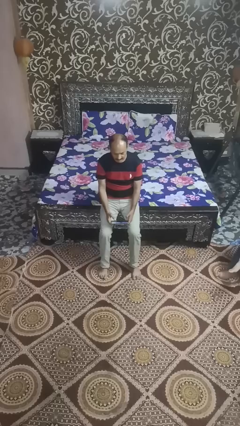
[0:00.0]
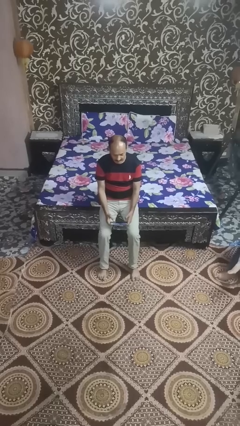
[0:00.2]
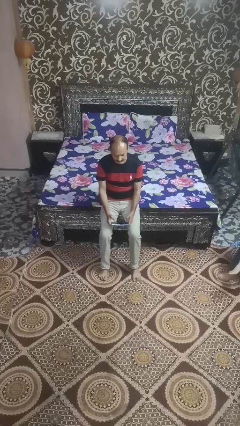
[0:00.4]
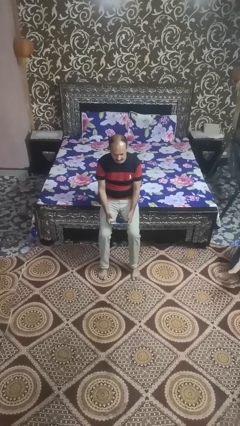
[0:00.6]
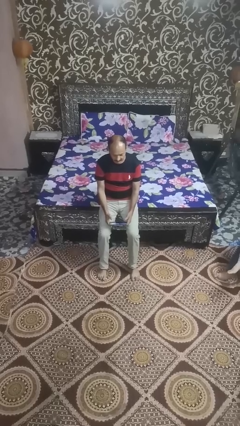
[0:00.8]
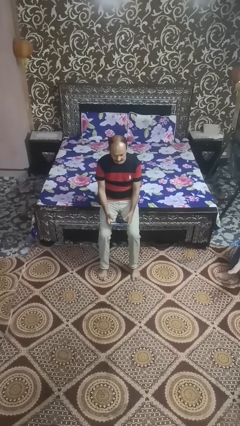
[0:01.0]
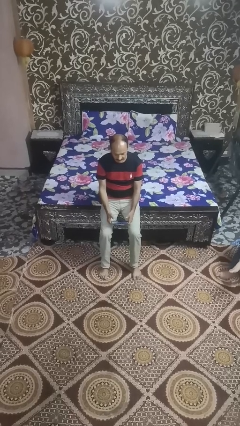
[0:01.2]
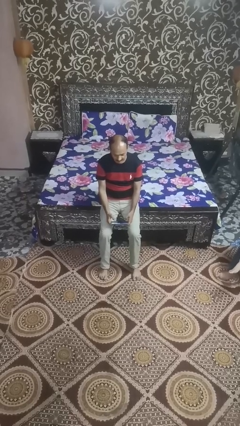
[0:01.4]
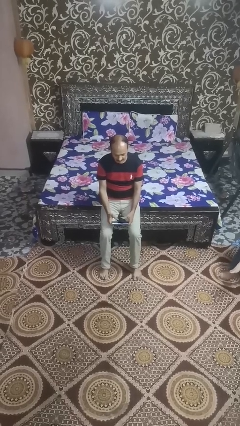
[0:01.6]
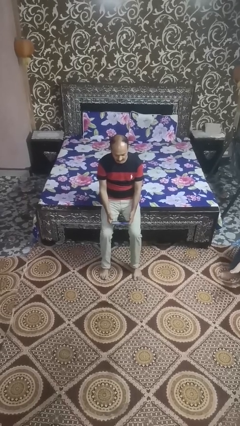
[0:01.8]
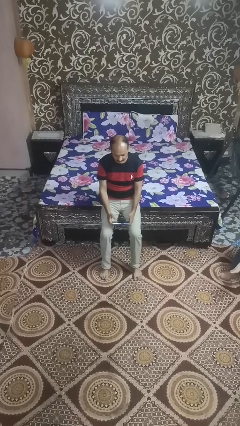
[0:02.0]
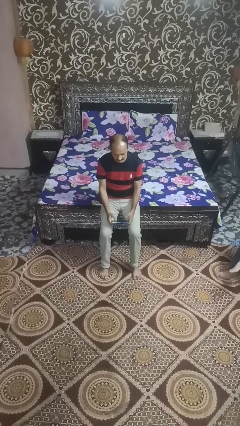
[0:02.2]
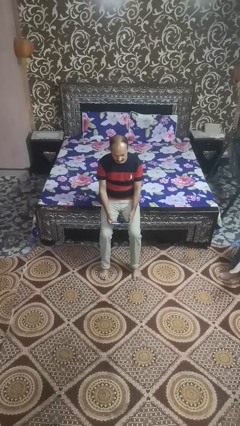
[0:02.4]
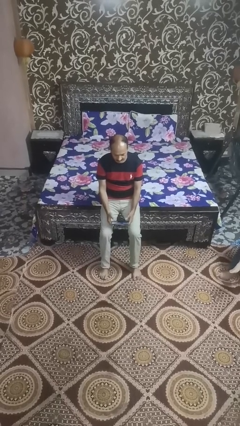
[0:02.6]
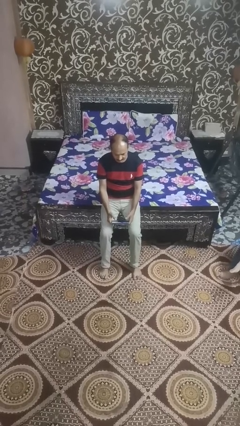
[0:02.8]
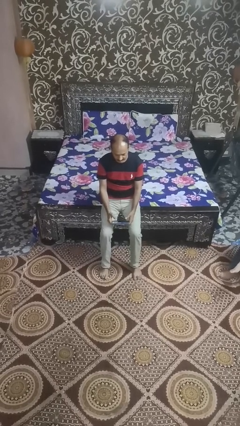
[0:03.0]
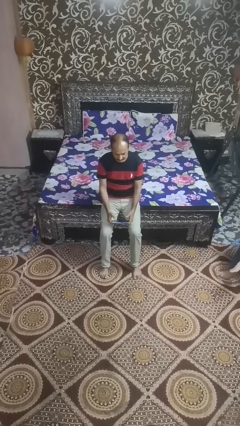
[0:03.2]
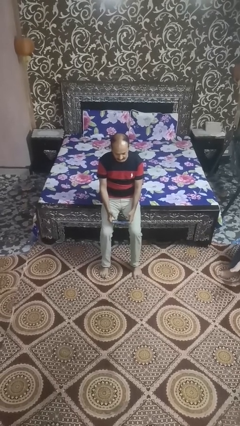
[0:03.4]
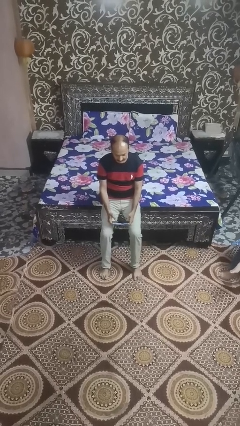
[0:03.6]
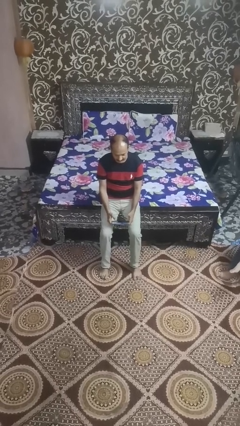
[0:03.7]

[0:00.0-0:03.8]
person interacts with handheld game

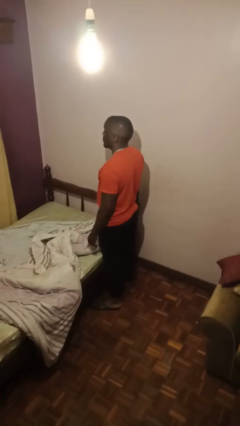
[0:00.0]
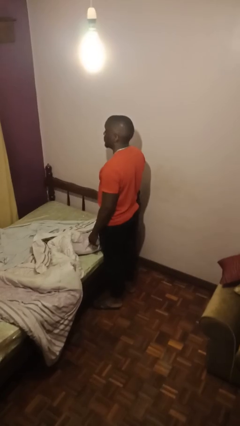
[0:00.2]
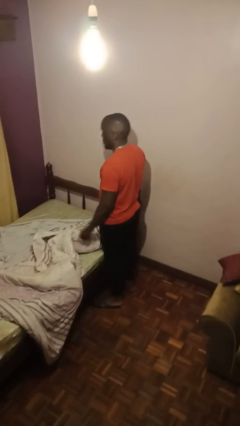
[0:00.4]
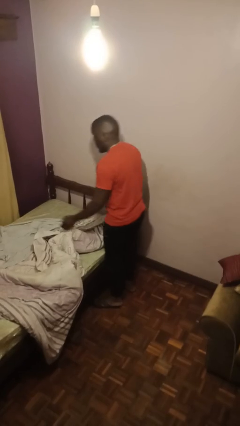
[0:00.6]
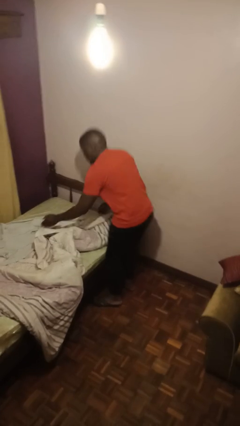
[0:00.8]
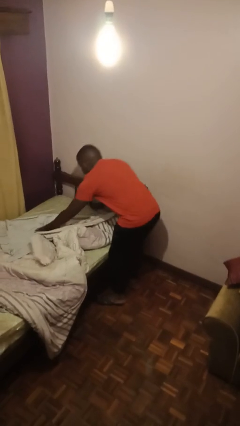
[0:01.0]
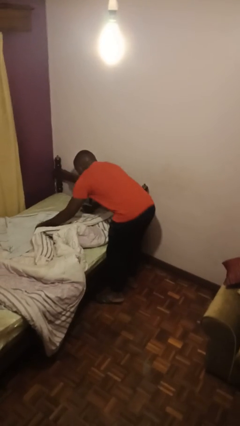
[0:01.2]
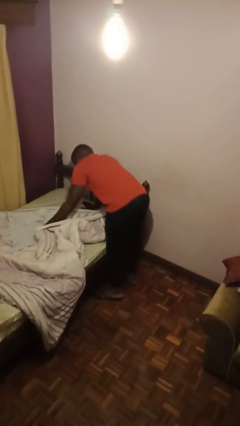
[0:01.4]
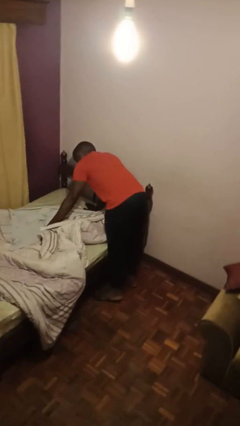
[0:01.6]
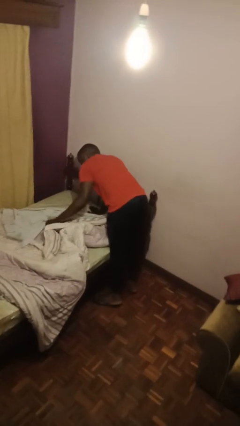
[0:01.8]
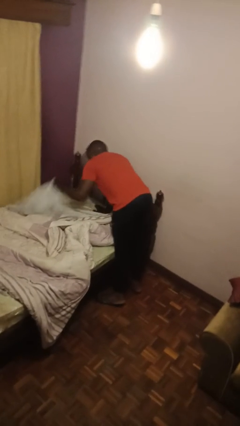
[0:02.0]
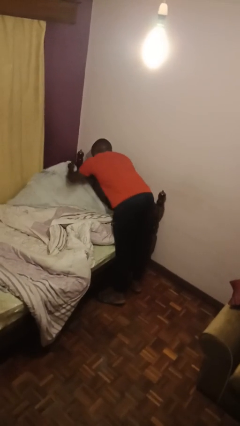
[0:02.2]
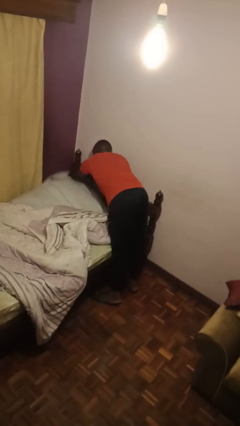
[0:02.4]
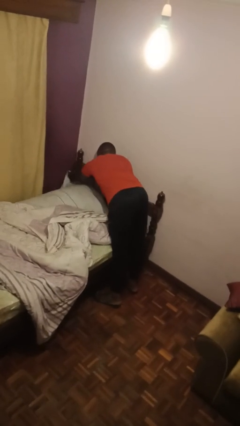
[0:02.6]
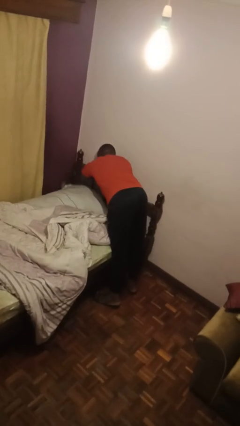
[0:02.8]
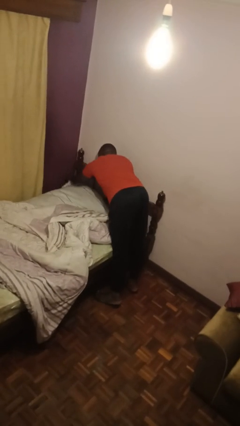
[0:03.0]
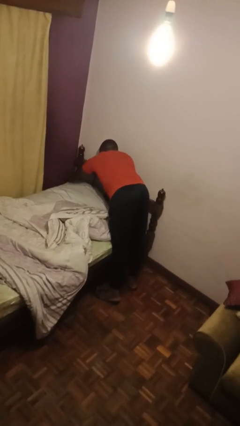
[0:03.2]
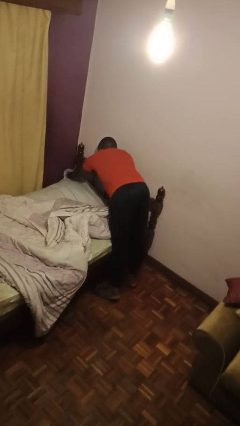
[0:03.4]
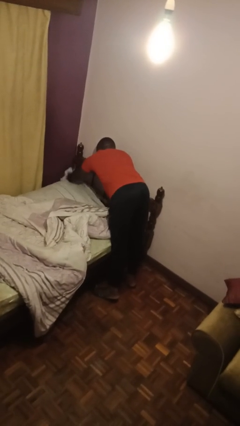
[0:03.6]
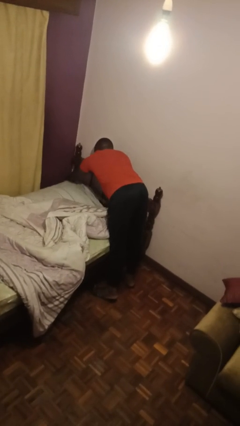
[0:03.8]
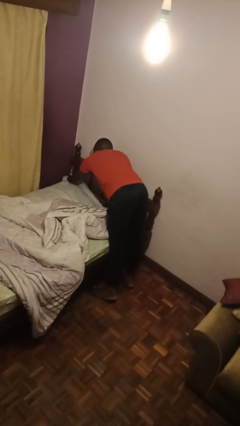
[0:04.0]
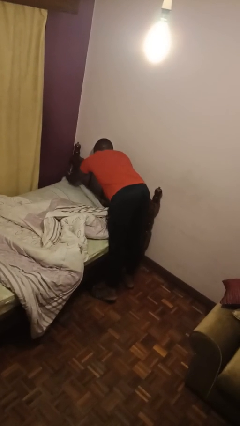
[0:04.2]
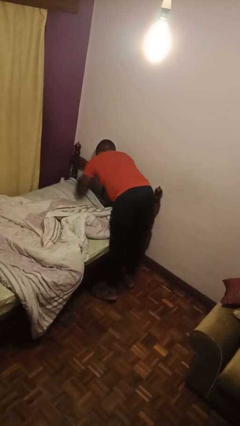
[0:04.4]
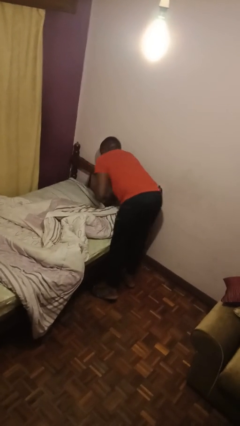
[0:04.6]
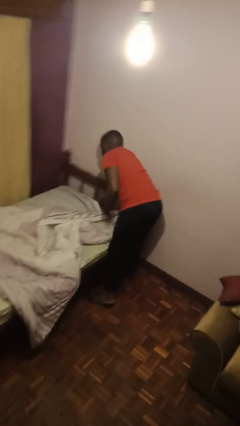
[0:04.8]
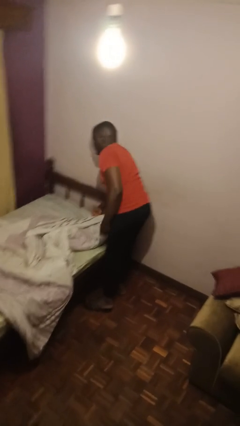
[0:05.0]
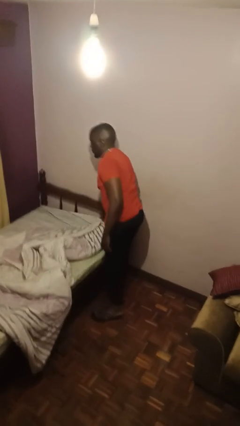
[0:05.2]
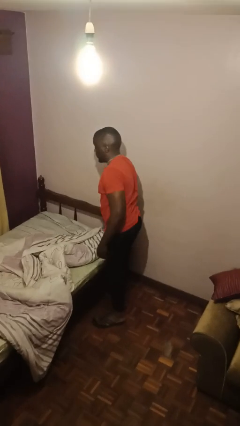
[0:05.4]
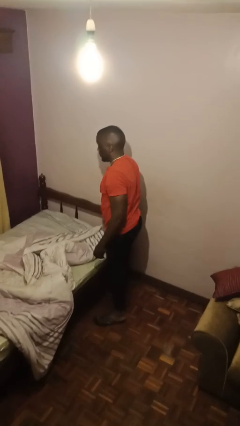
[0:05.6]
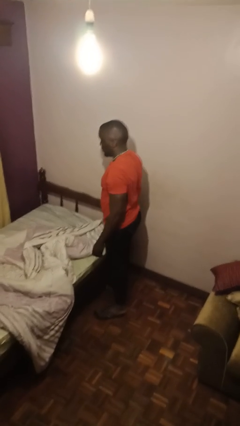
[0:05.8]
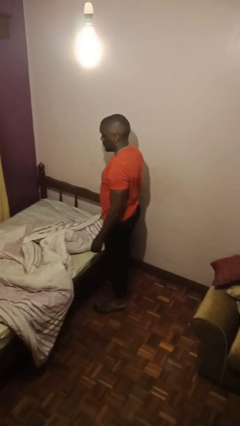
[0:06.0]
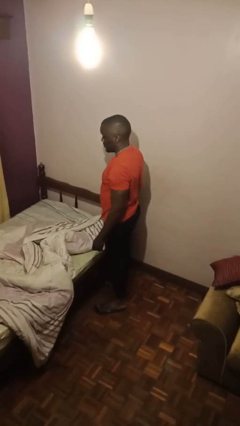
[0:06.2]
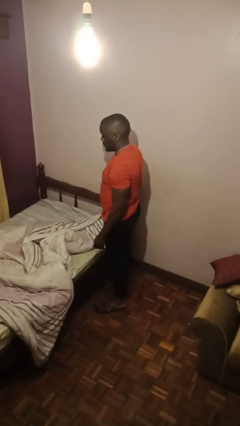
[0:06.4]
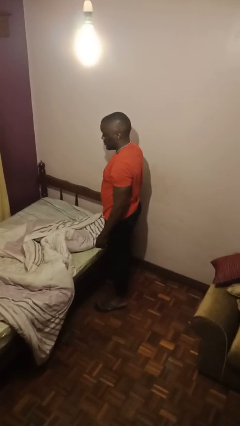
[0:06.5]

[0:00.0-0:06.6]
person makes bed

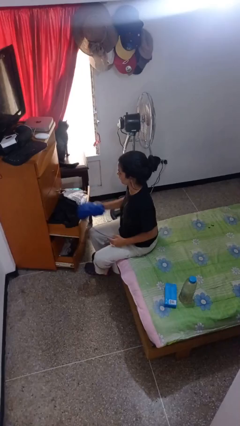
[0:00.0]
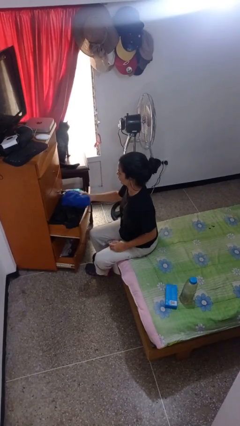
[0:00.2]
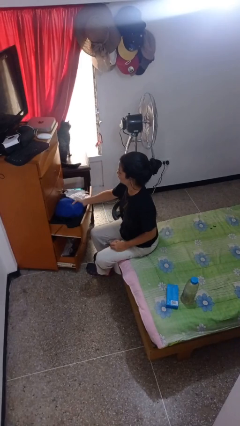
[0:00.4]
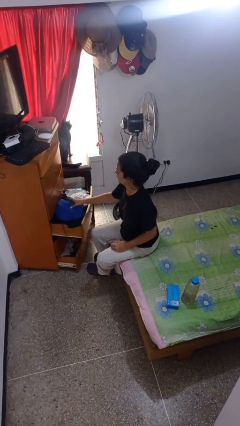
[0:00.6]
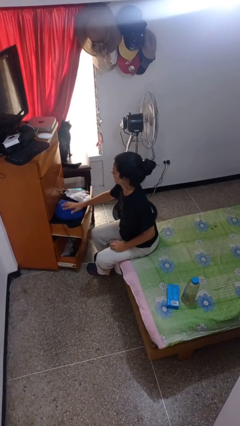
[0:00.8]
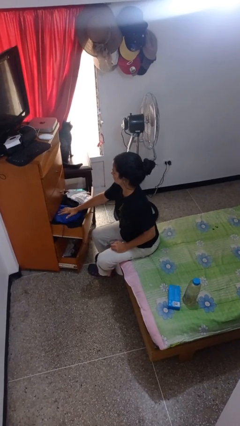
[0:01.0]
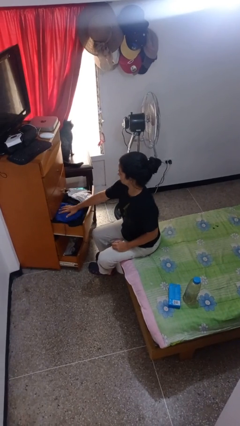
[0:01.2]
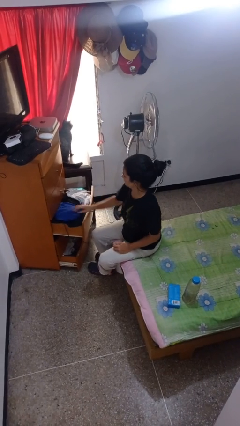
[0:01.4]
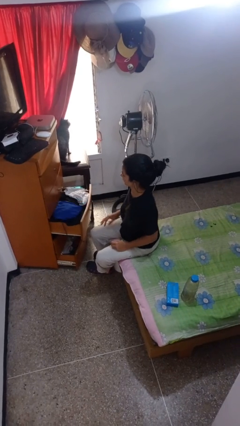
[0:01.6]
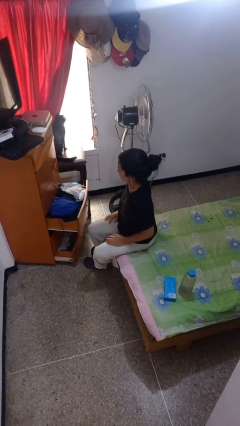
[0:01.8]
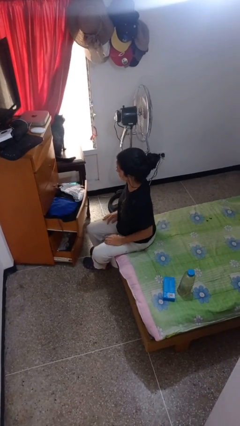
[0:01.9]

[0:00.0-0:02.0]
person puts clothes into dresser

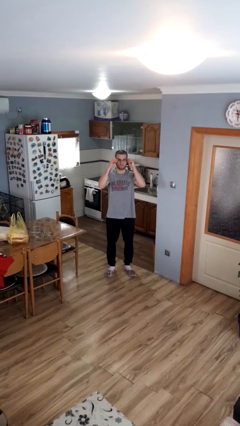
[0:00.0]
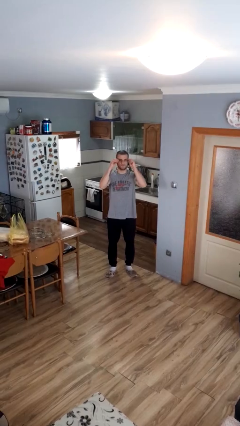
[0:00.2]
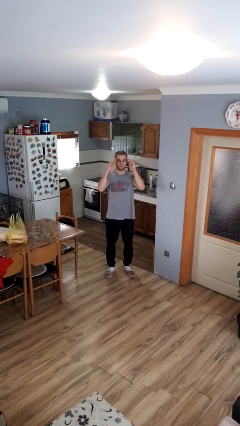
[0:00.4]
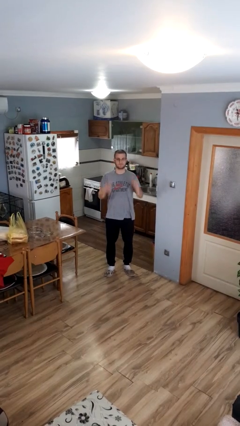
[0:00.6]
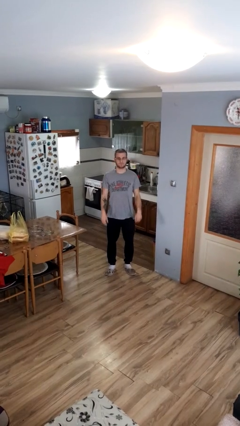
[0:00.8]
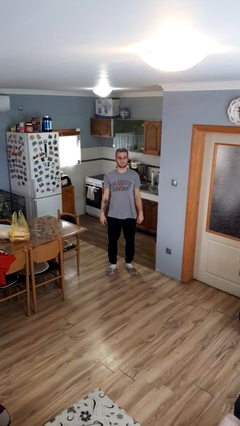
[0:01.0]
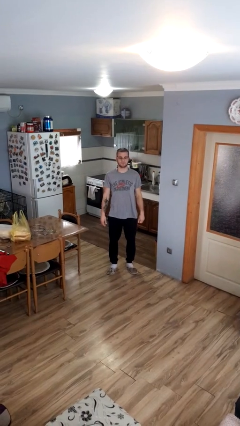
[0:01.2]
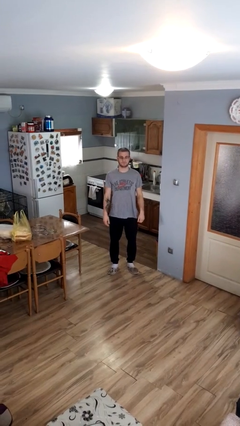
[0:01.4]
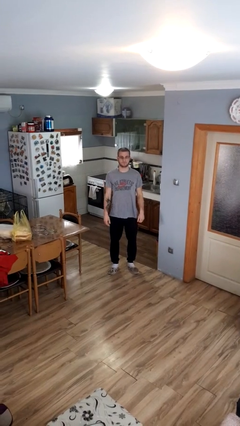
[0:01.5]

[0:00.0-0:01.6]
person puts on glasses

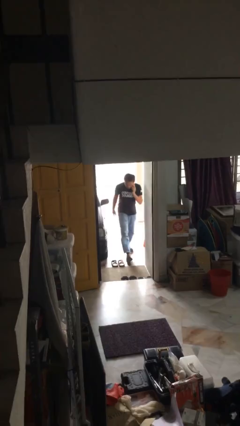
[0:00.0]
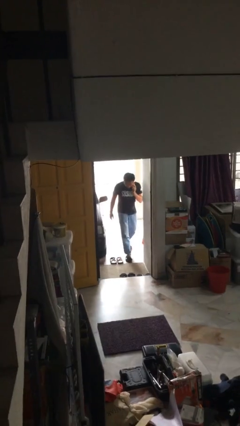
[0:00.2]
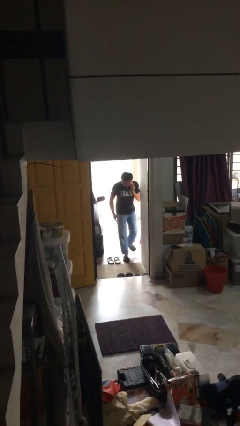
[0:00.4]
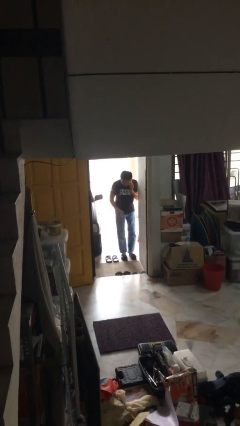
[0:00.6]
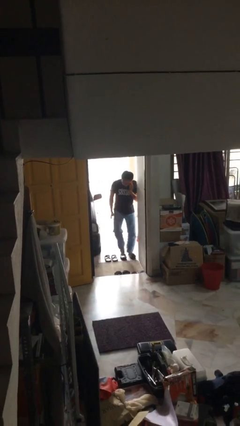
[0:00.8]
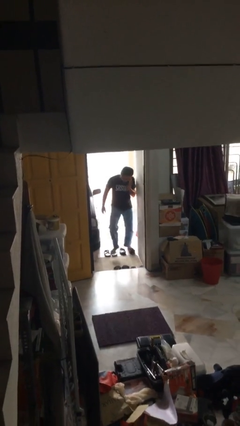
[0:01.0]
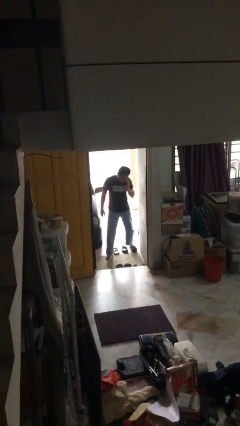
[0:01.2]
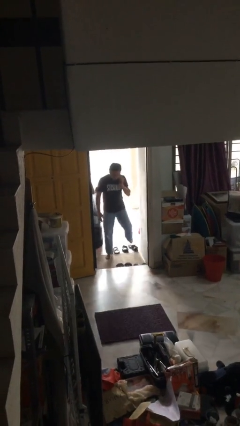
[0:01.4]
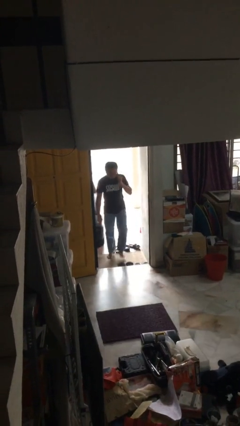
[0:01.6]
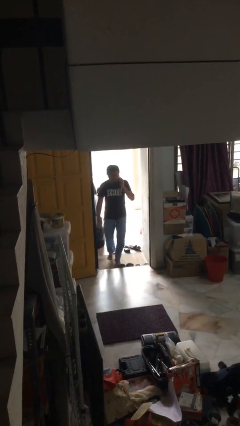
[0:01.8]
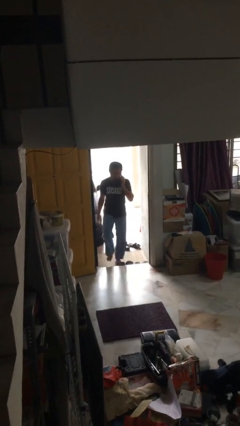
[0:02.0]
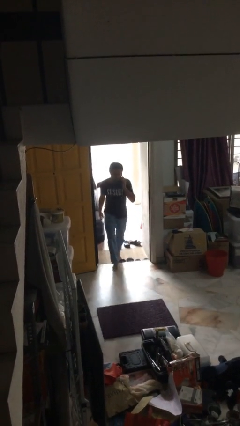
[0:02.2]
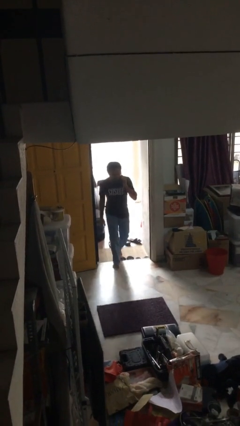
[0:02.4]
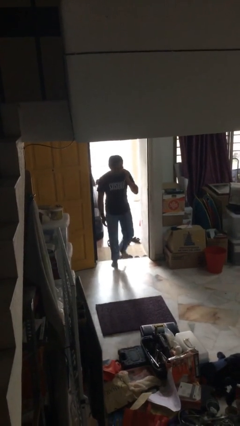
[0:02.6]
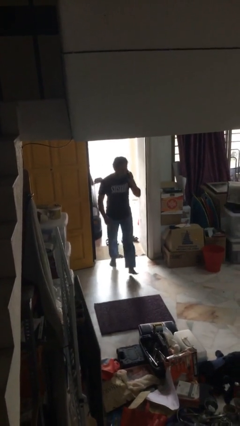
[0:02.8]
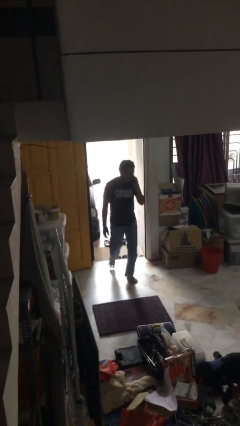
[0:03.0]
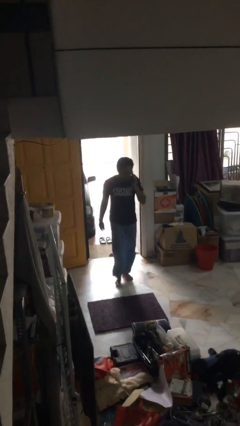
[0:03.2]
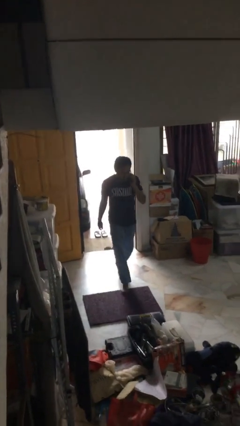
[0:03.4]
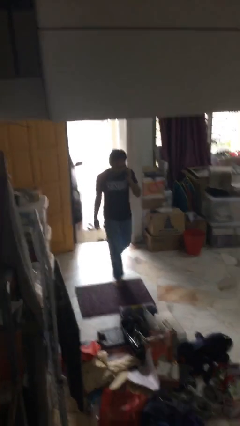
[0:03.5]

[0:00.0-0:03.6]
person enters scene through structure
